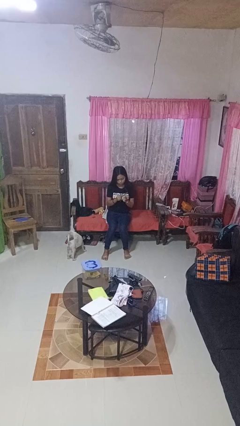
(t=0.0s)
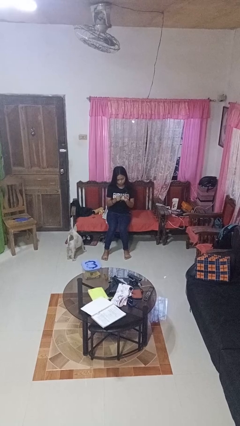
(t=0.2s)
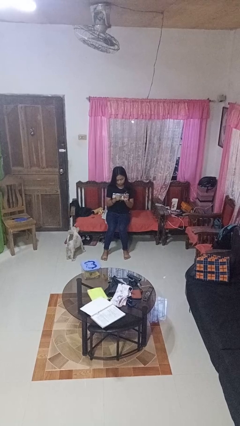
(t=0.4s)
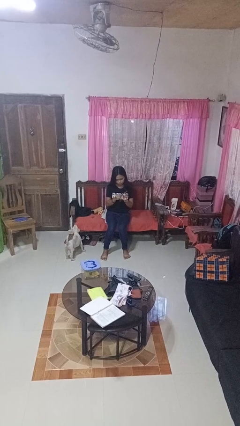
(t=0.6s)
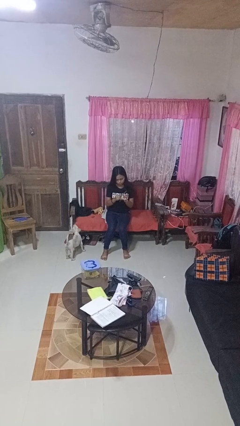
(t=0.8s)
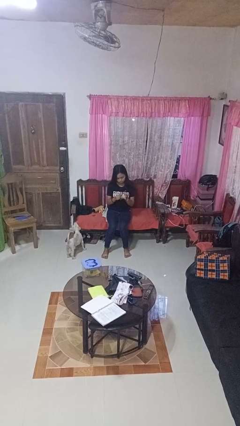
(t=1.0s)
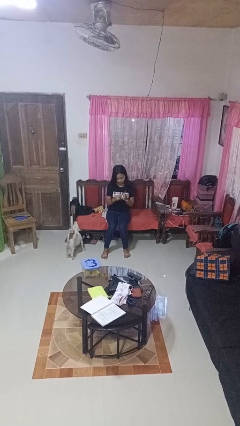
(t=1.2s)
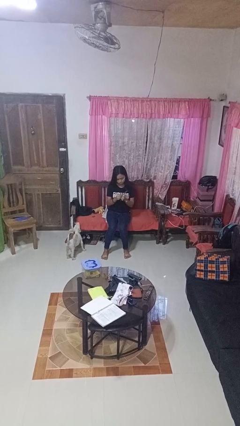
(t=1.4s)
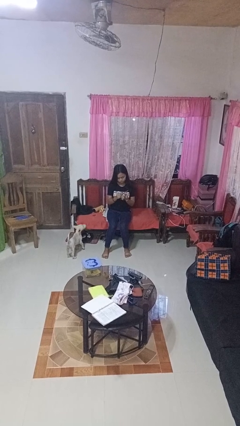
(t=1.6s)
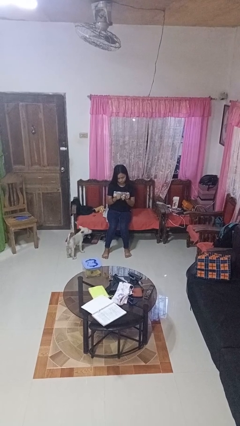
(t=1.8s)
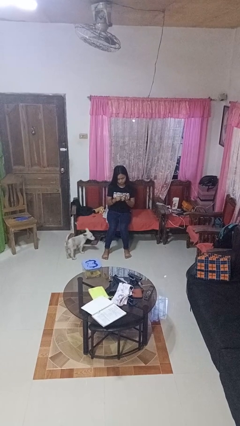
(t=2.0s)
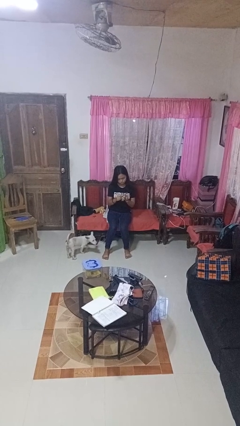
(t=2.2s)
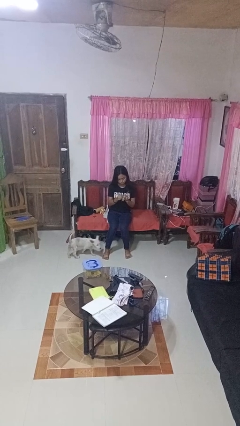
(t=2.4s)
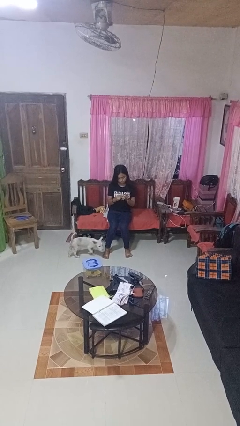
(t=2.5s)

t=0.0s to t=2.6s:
person files fingernails

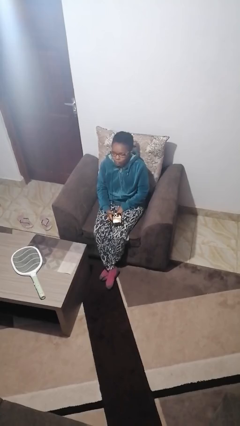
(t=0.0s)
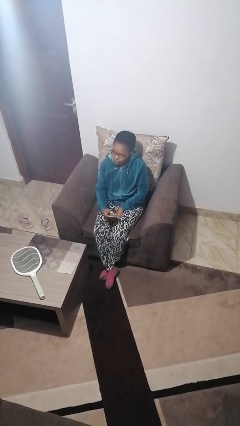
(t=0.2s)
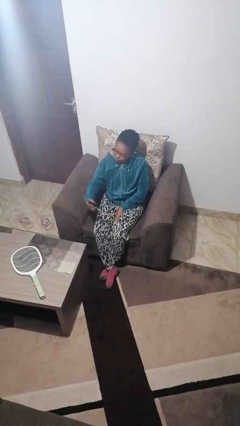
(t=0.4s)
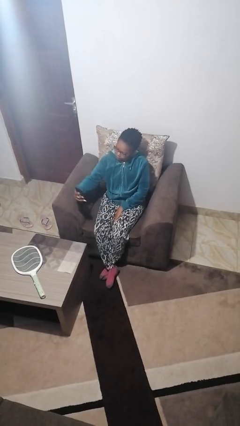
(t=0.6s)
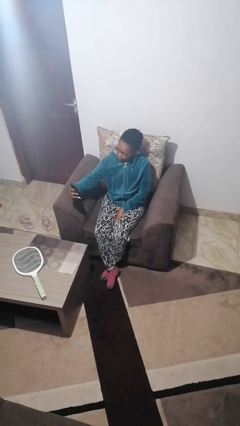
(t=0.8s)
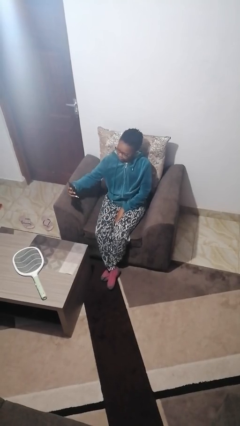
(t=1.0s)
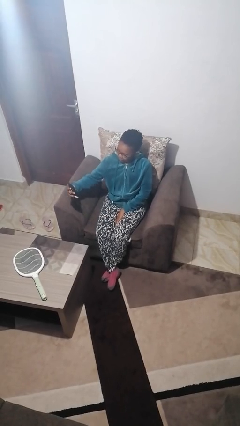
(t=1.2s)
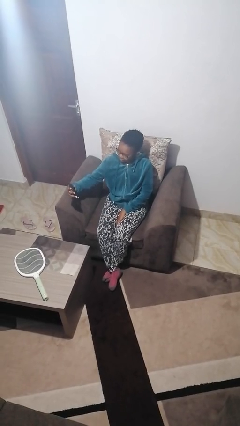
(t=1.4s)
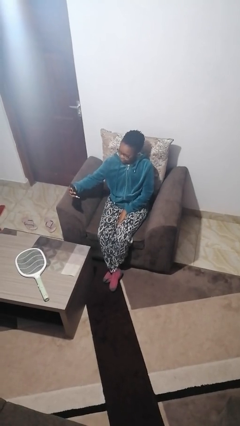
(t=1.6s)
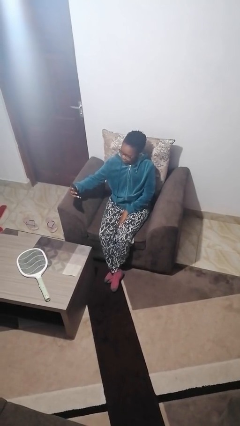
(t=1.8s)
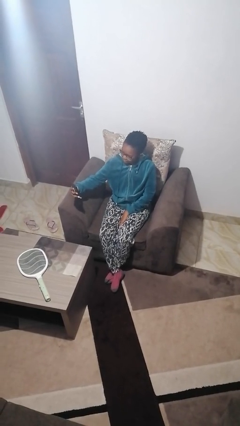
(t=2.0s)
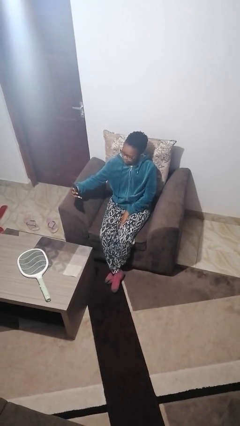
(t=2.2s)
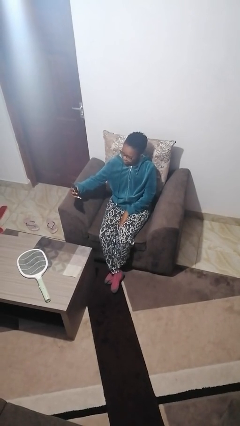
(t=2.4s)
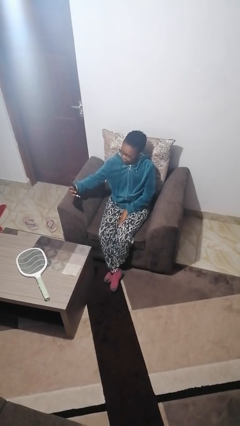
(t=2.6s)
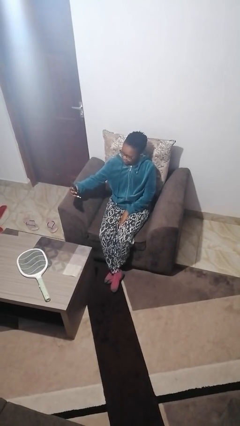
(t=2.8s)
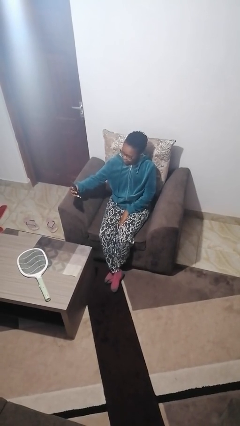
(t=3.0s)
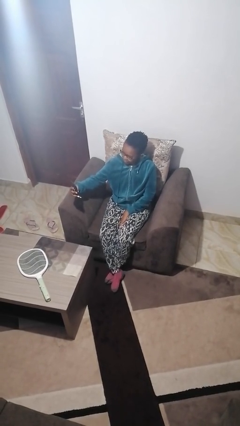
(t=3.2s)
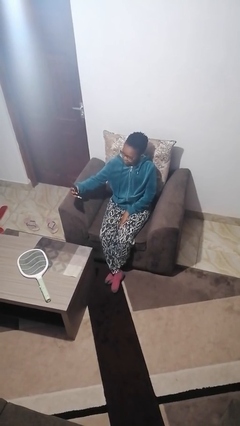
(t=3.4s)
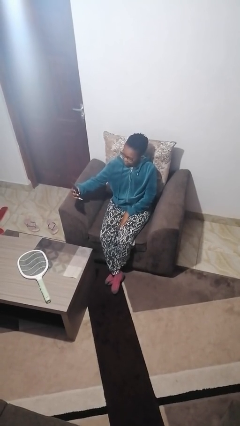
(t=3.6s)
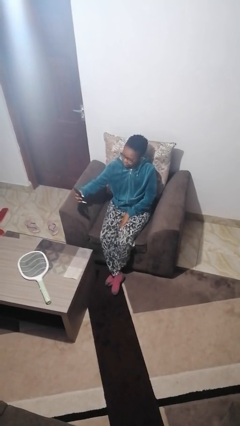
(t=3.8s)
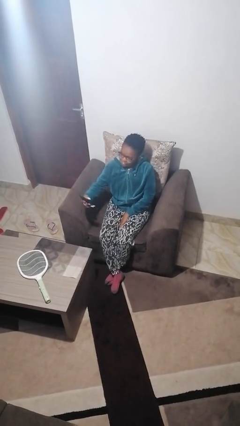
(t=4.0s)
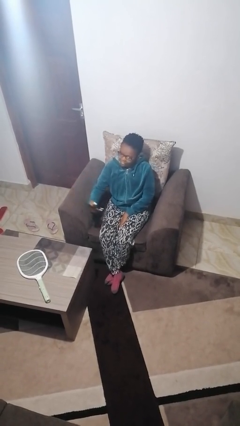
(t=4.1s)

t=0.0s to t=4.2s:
person takes selfie

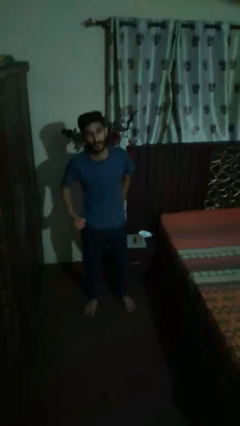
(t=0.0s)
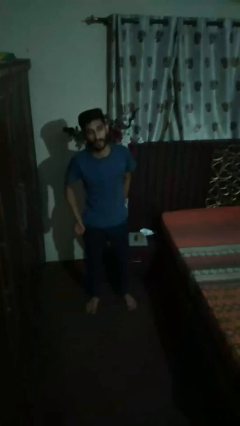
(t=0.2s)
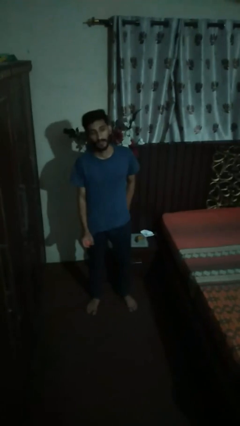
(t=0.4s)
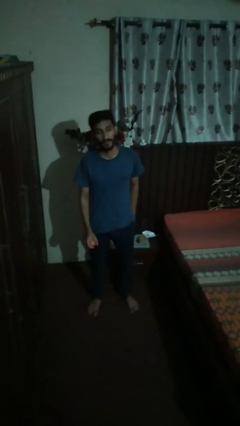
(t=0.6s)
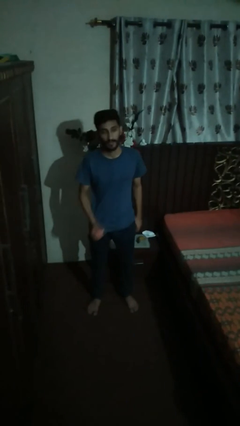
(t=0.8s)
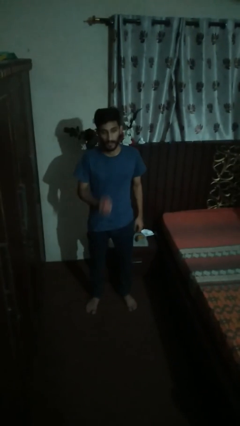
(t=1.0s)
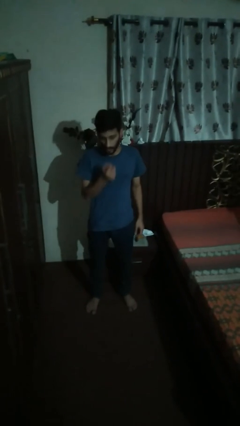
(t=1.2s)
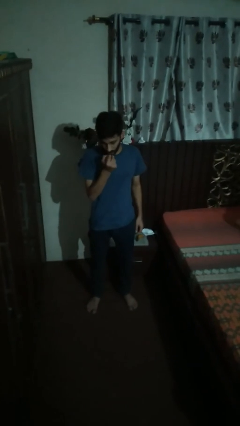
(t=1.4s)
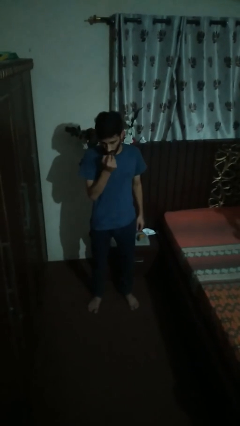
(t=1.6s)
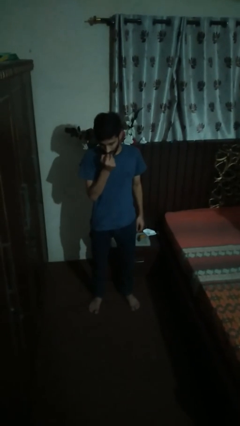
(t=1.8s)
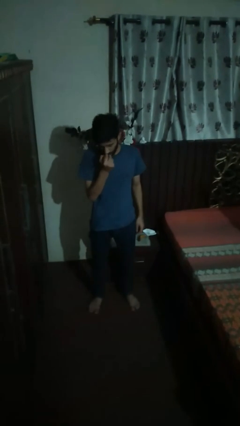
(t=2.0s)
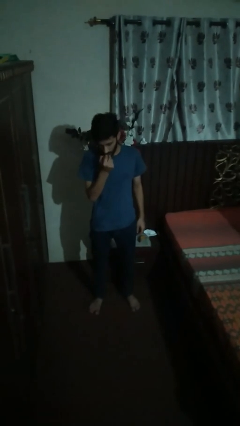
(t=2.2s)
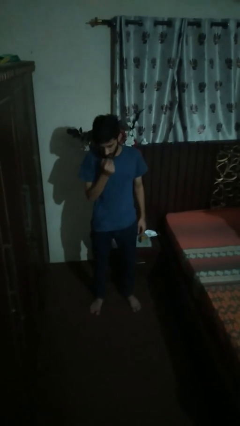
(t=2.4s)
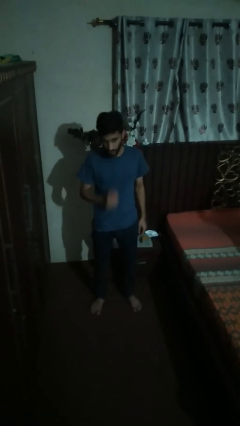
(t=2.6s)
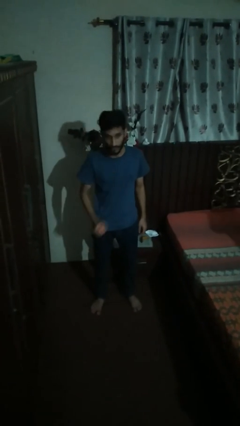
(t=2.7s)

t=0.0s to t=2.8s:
person eats apple

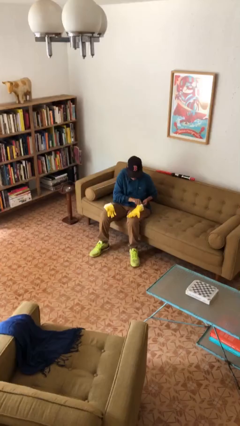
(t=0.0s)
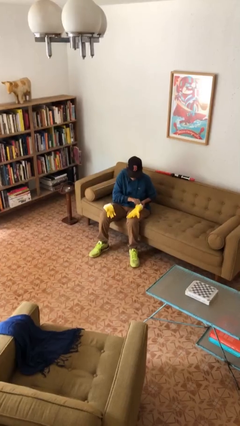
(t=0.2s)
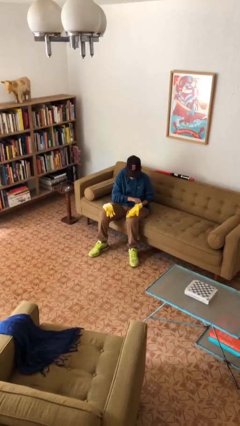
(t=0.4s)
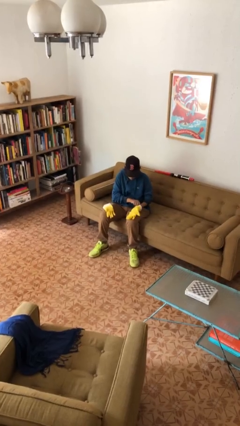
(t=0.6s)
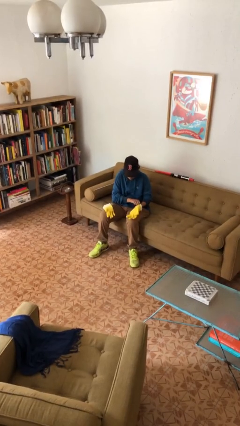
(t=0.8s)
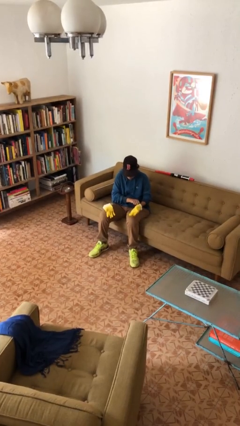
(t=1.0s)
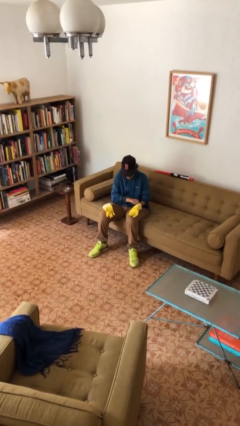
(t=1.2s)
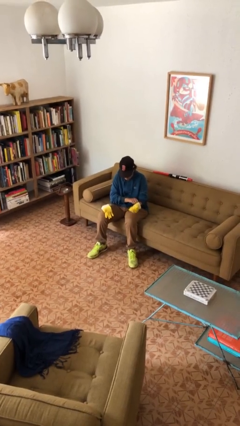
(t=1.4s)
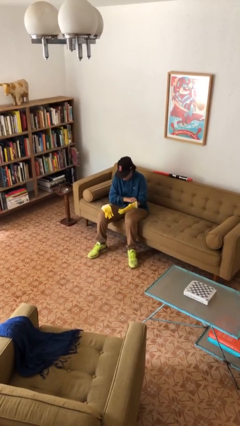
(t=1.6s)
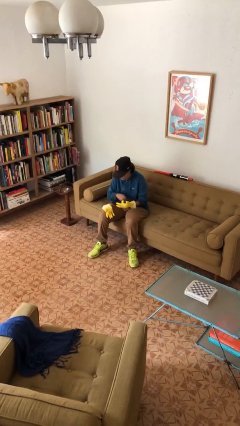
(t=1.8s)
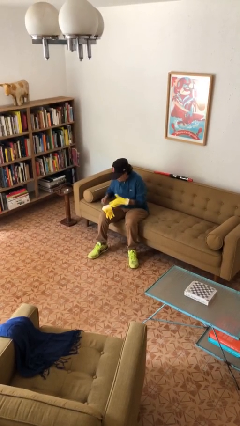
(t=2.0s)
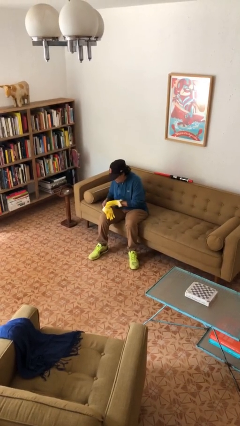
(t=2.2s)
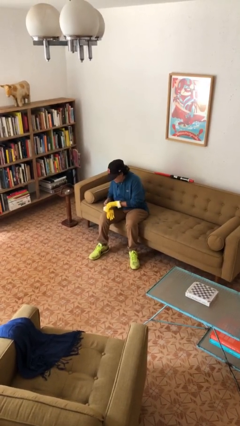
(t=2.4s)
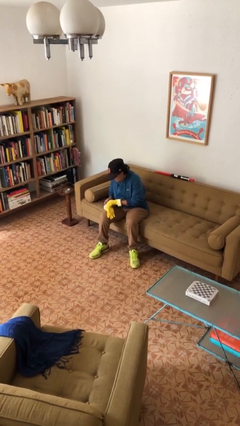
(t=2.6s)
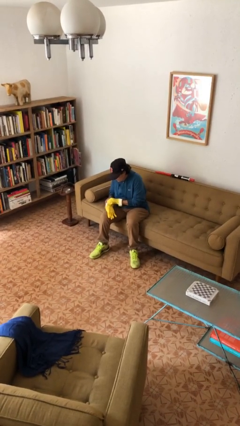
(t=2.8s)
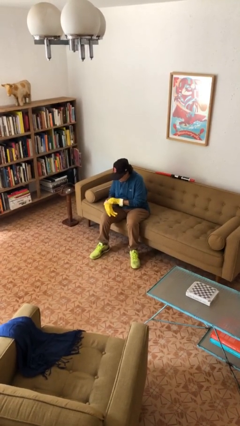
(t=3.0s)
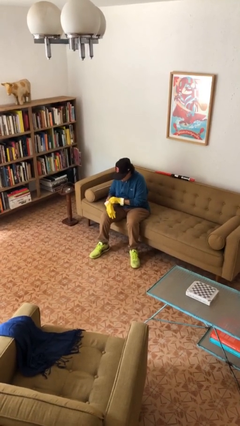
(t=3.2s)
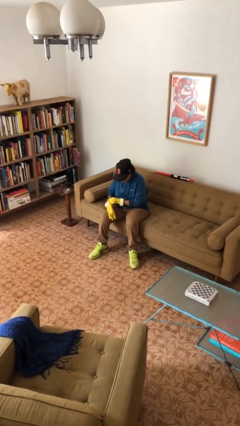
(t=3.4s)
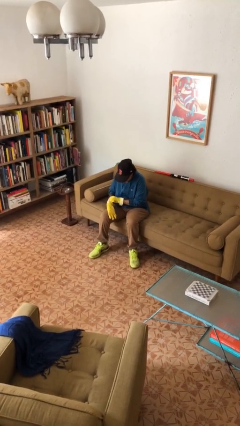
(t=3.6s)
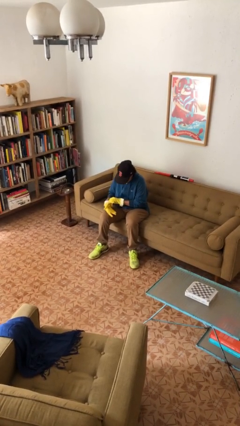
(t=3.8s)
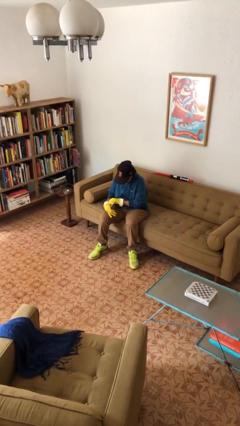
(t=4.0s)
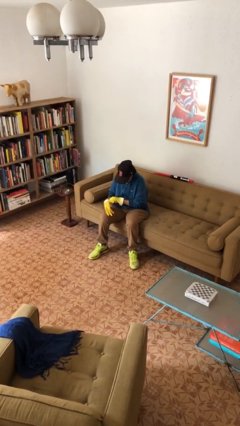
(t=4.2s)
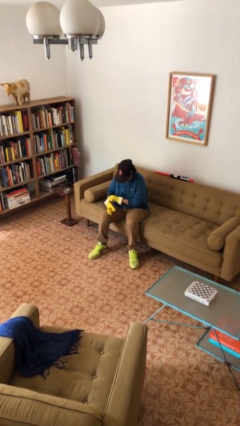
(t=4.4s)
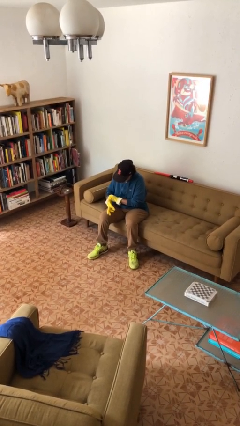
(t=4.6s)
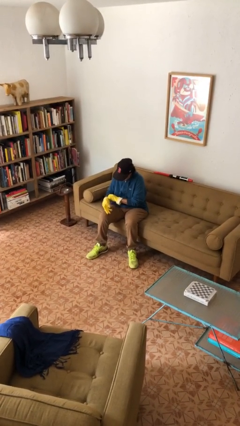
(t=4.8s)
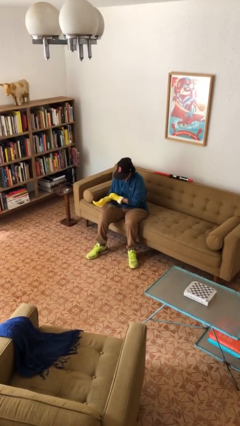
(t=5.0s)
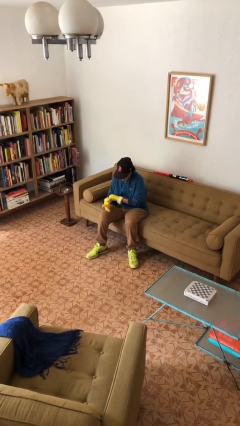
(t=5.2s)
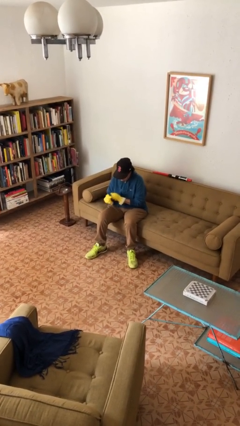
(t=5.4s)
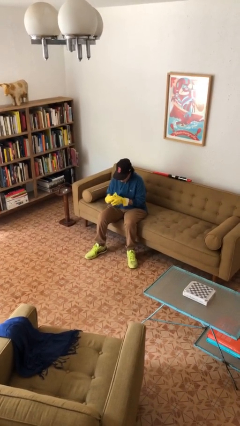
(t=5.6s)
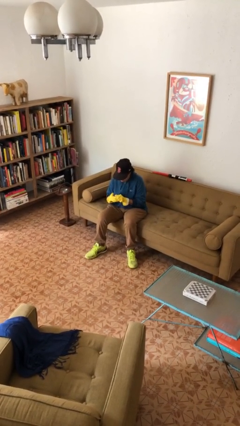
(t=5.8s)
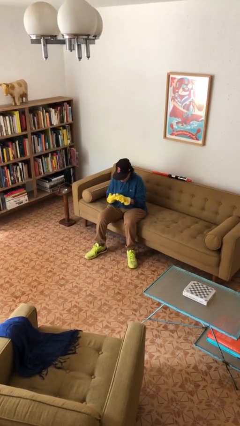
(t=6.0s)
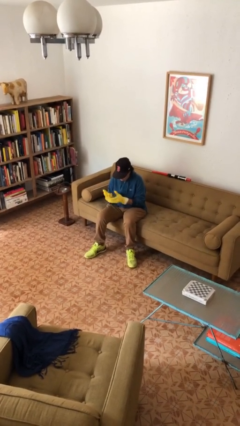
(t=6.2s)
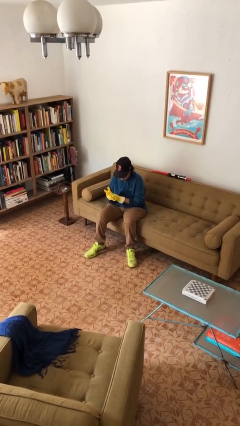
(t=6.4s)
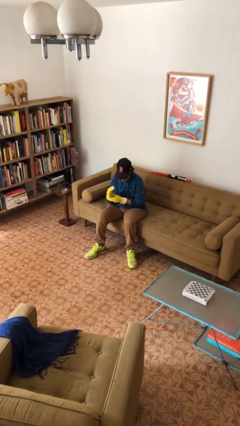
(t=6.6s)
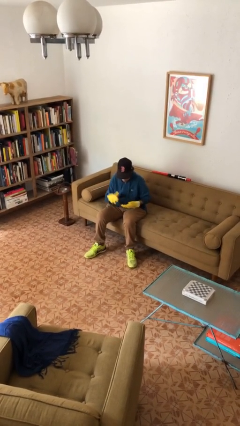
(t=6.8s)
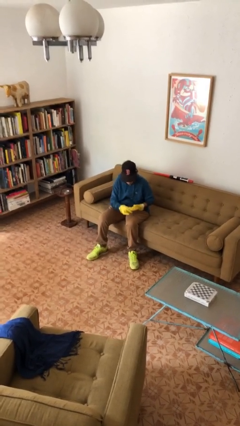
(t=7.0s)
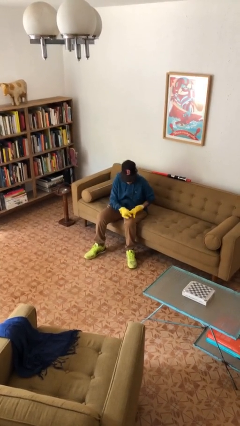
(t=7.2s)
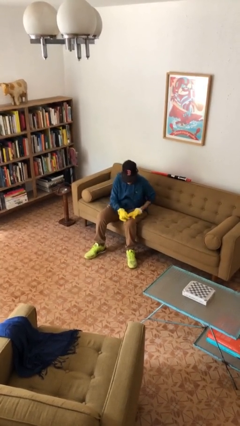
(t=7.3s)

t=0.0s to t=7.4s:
person puts on gloves

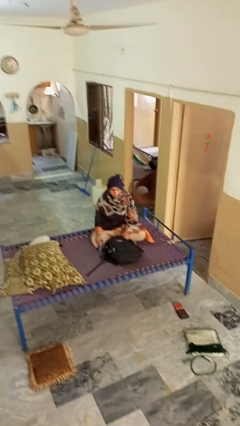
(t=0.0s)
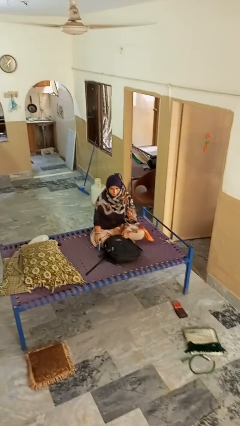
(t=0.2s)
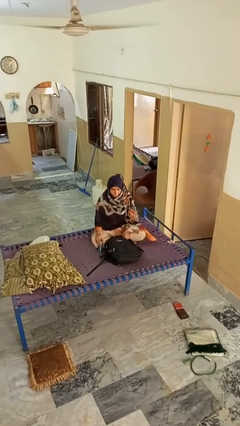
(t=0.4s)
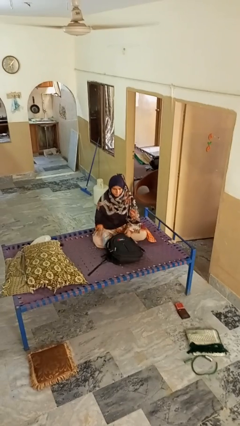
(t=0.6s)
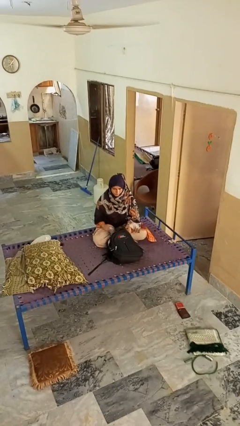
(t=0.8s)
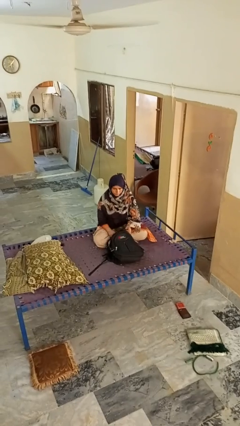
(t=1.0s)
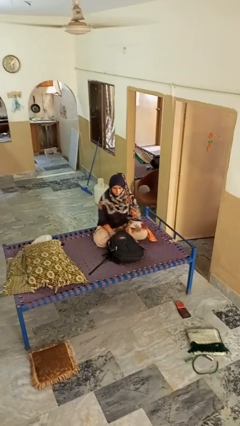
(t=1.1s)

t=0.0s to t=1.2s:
person puts object into bag
